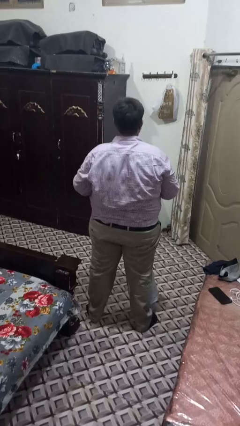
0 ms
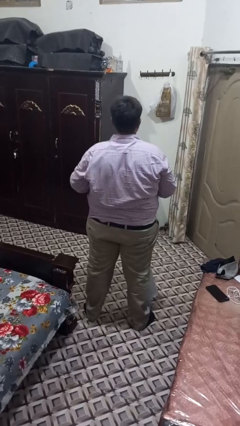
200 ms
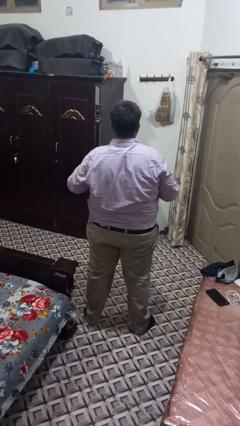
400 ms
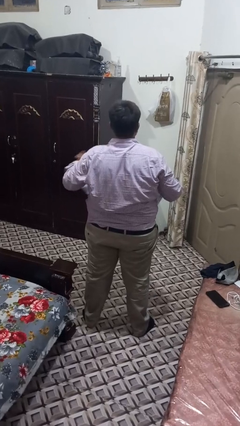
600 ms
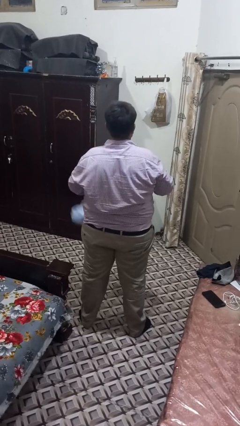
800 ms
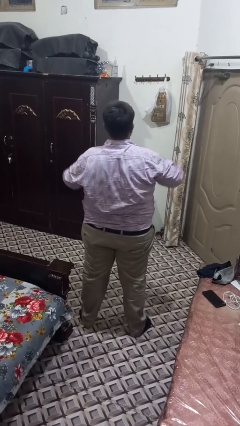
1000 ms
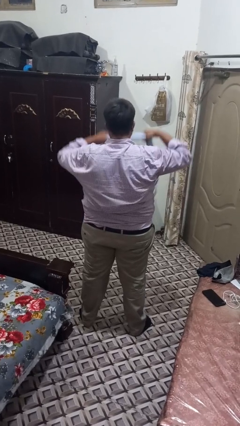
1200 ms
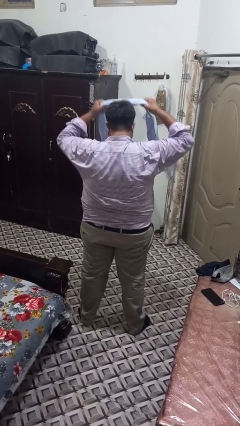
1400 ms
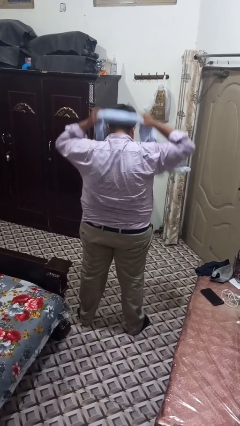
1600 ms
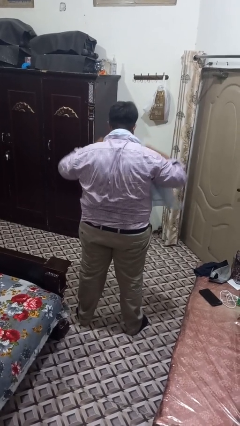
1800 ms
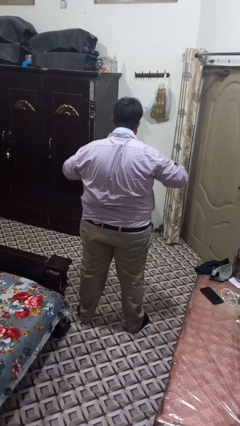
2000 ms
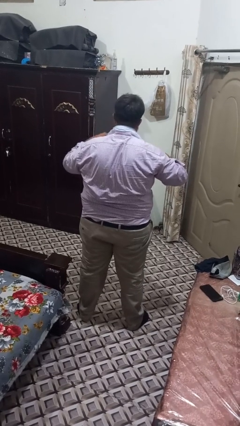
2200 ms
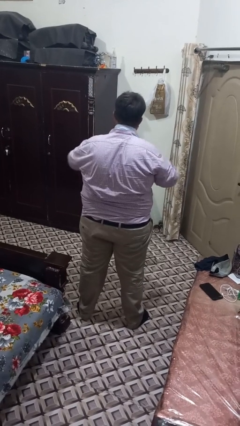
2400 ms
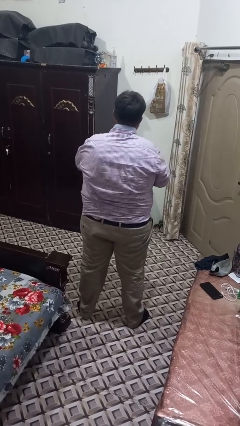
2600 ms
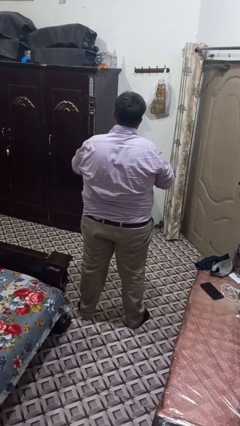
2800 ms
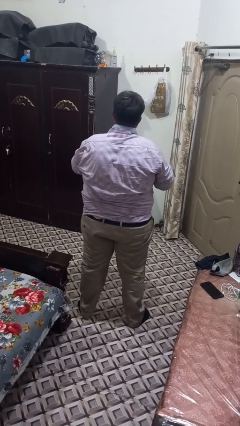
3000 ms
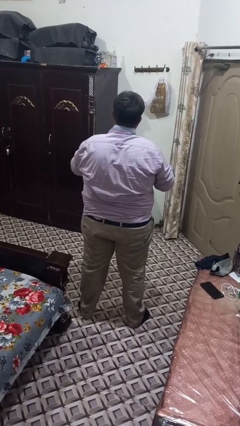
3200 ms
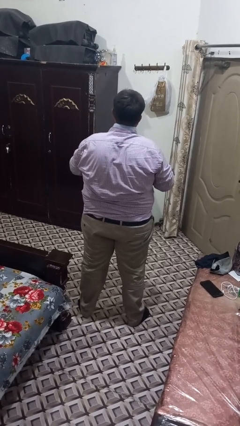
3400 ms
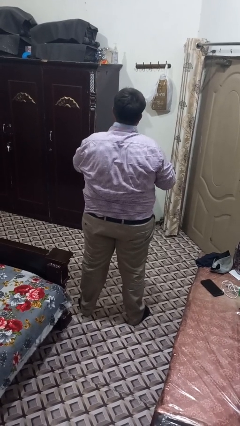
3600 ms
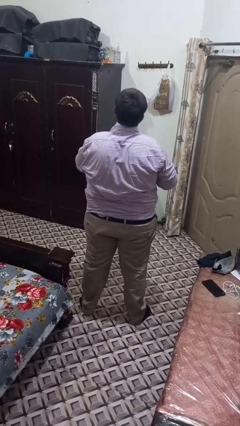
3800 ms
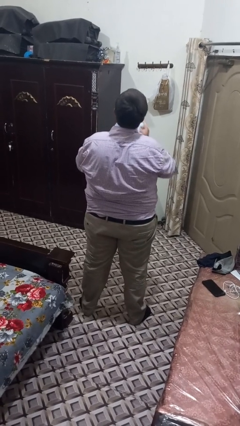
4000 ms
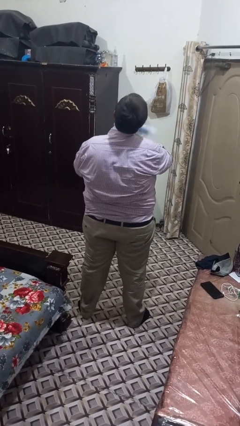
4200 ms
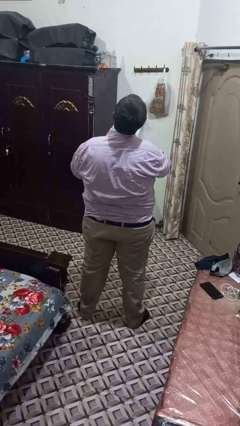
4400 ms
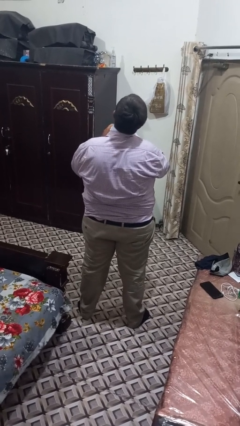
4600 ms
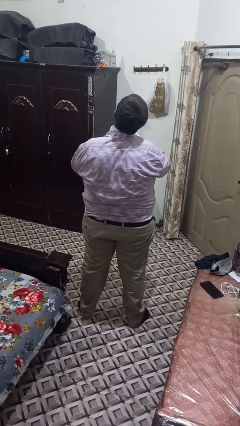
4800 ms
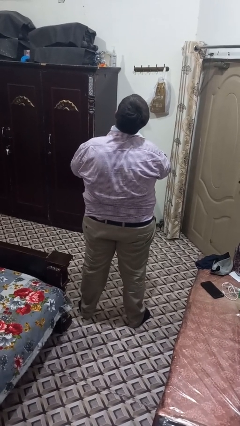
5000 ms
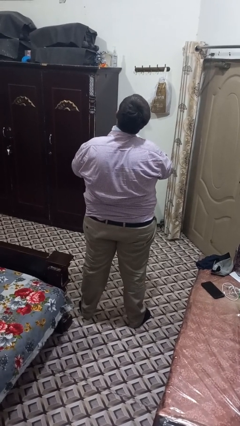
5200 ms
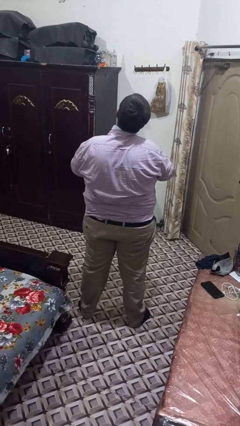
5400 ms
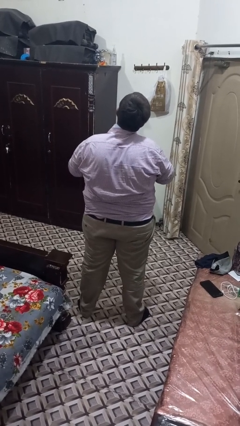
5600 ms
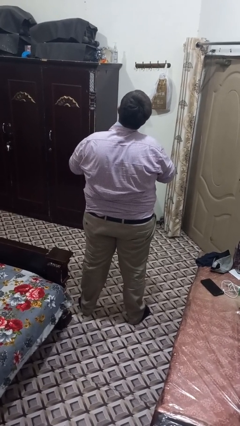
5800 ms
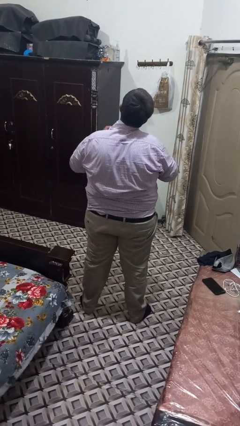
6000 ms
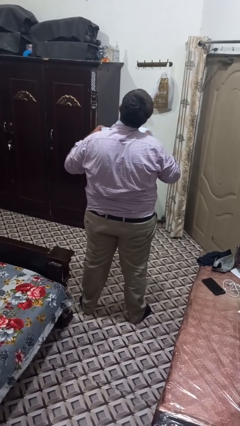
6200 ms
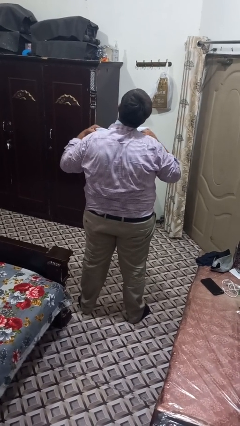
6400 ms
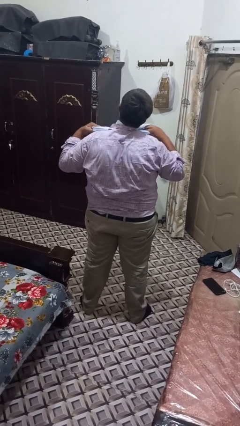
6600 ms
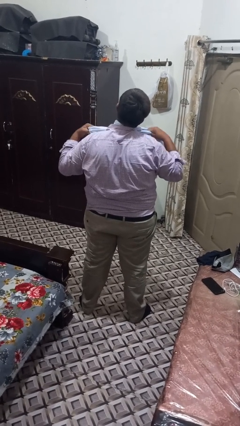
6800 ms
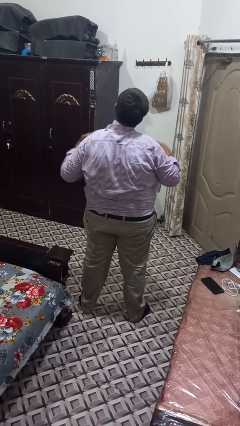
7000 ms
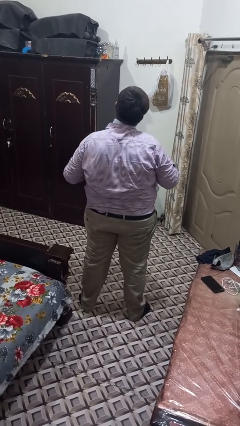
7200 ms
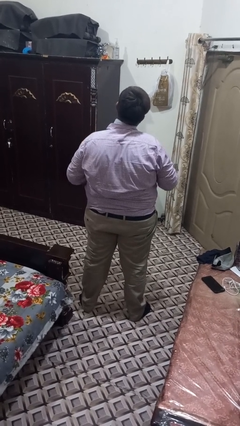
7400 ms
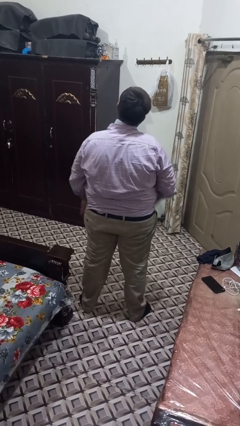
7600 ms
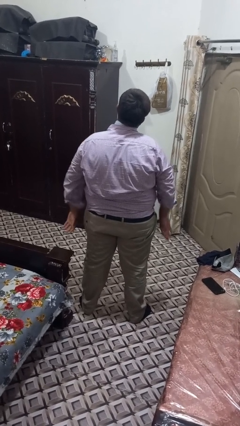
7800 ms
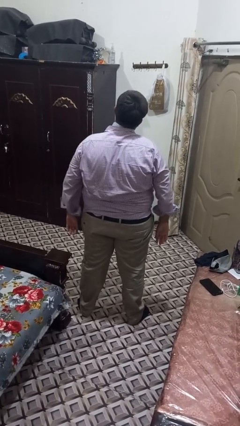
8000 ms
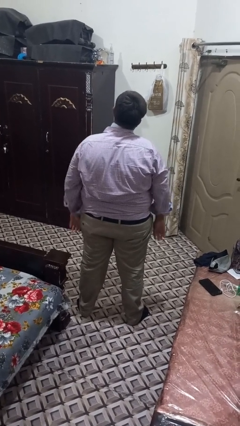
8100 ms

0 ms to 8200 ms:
person puts on scarf

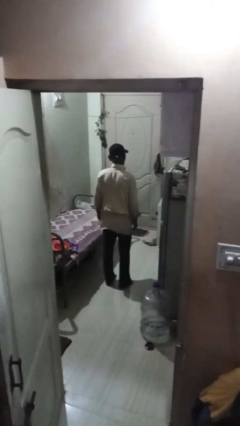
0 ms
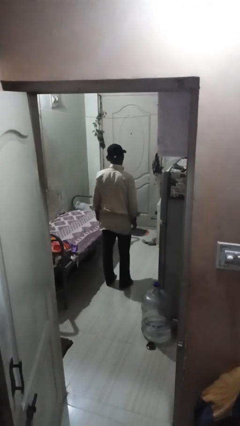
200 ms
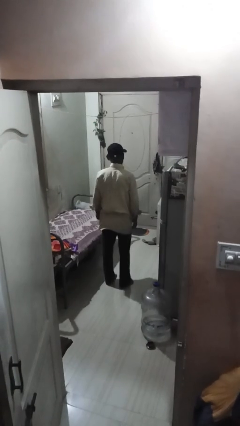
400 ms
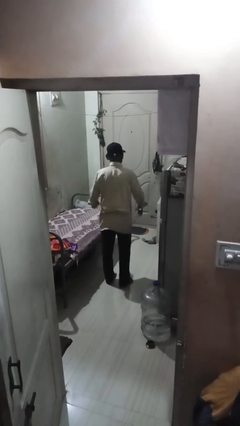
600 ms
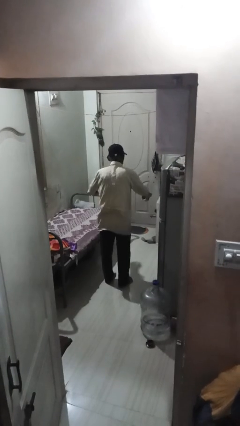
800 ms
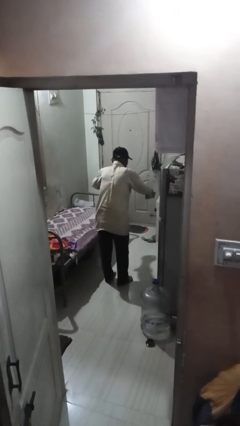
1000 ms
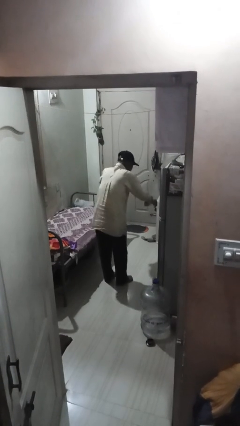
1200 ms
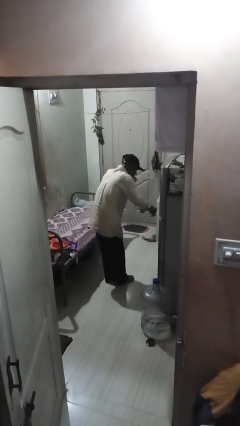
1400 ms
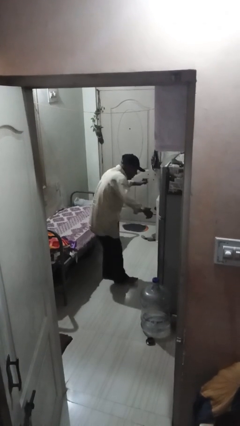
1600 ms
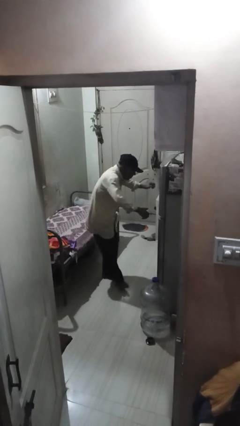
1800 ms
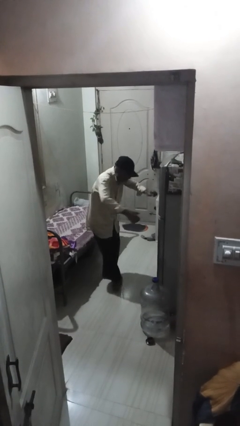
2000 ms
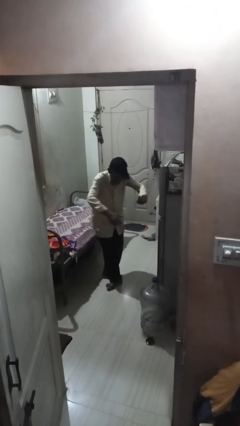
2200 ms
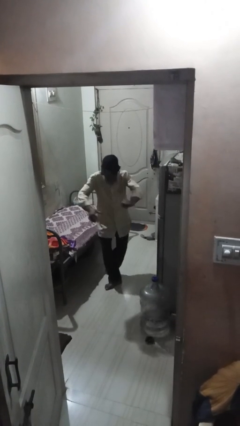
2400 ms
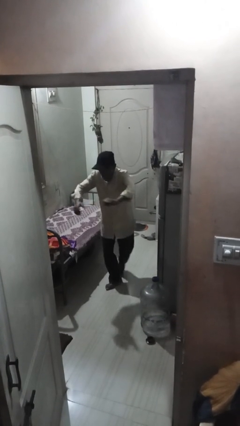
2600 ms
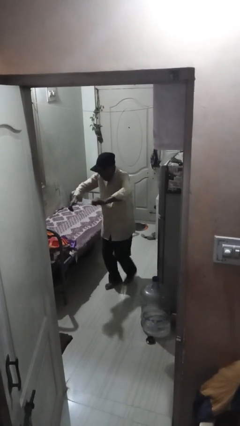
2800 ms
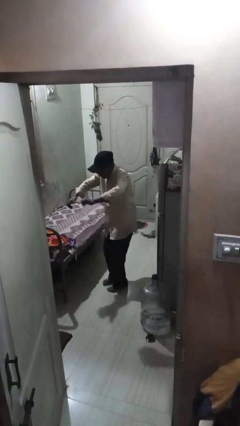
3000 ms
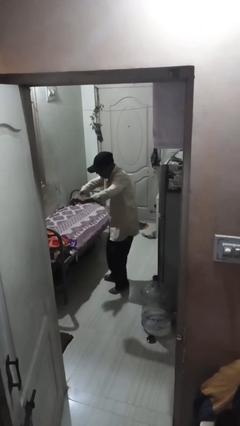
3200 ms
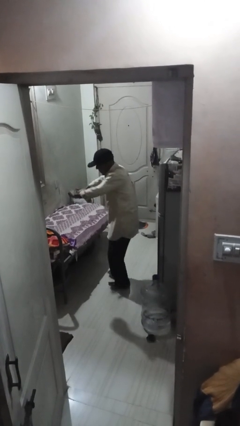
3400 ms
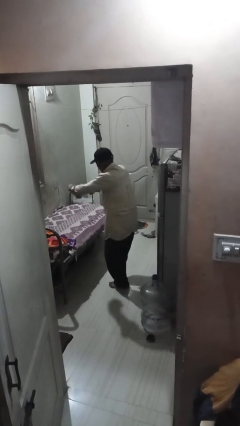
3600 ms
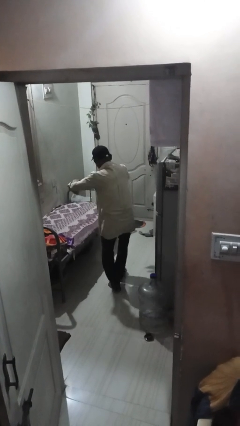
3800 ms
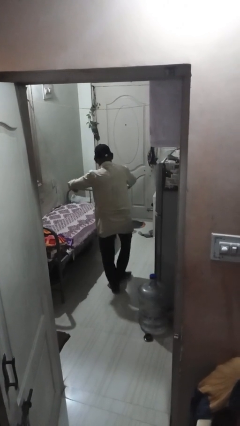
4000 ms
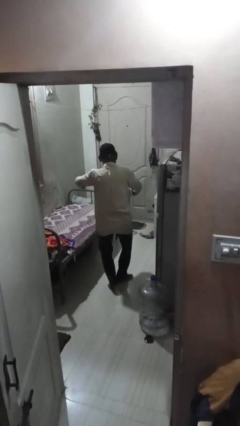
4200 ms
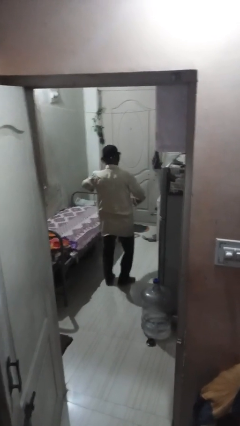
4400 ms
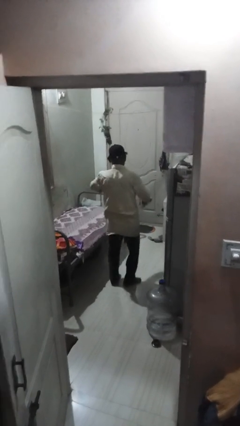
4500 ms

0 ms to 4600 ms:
person twirls

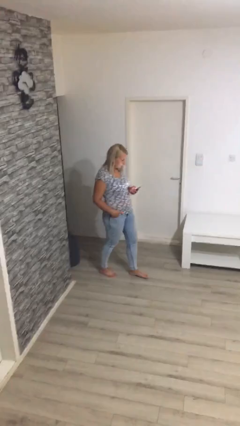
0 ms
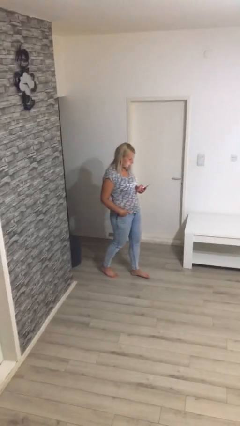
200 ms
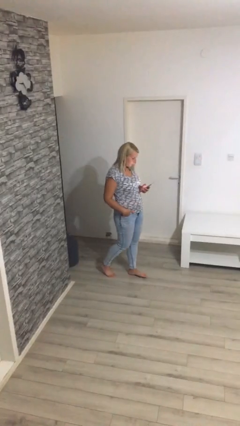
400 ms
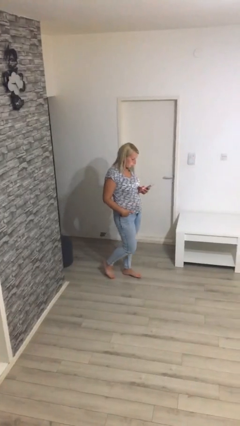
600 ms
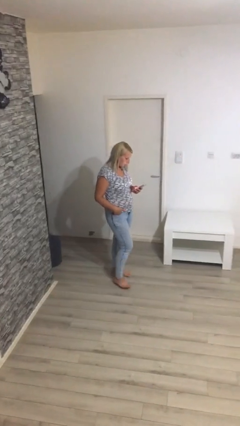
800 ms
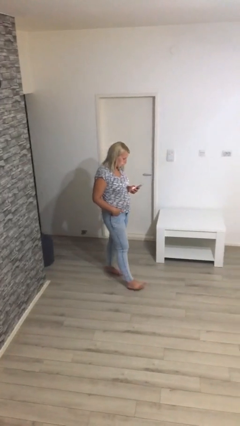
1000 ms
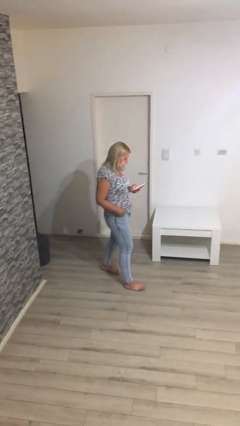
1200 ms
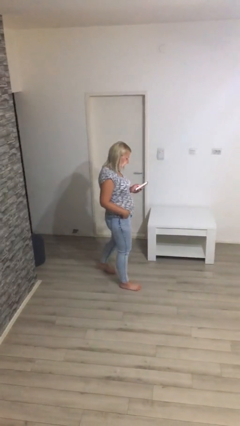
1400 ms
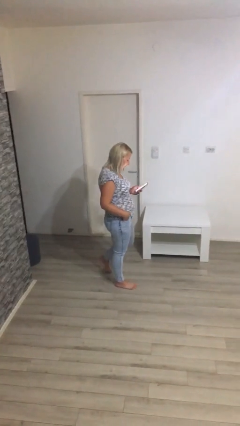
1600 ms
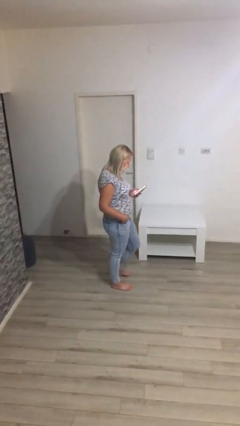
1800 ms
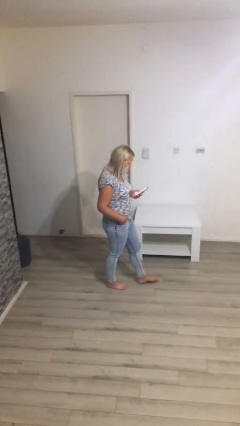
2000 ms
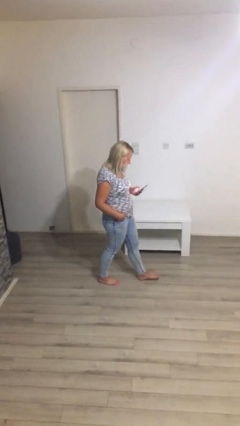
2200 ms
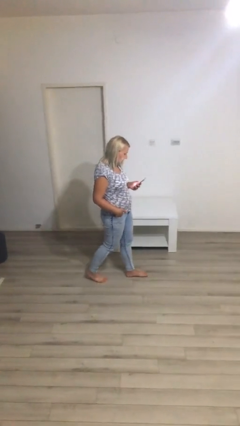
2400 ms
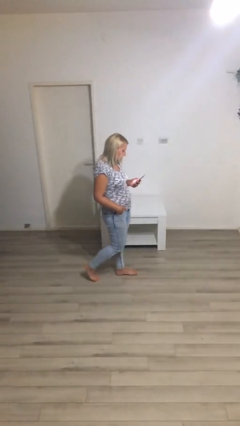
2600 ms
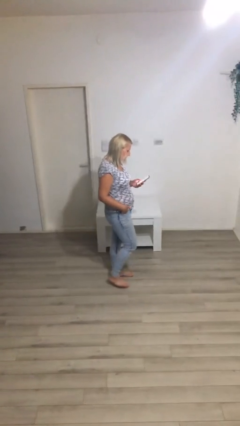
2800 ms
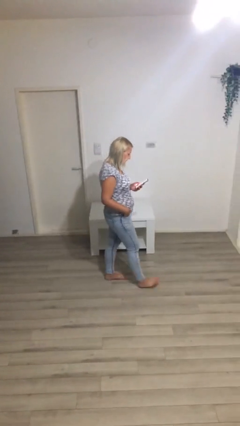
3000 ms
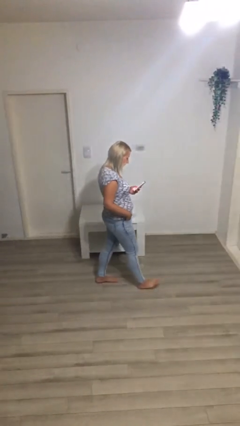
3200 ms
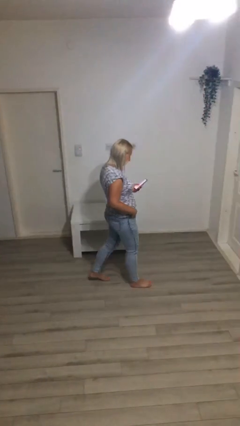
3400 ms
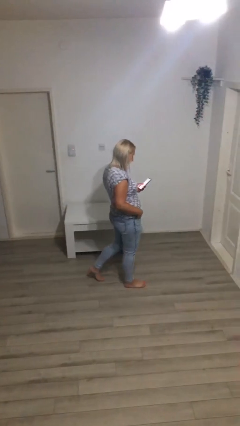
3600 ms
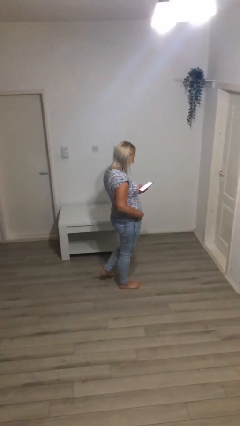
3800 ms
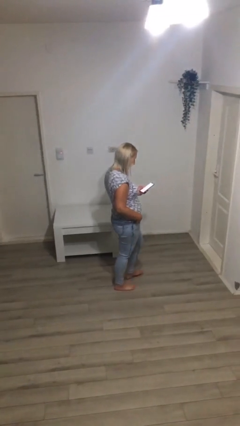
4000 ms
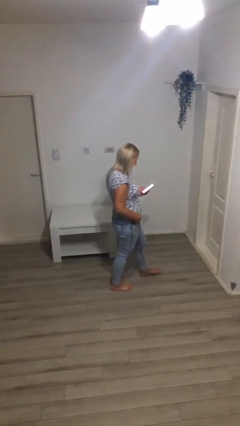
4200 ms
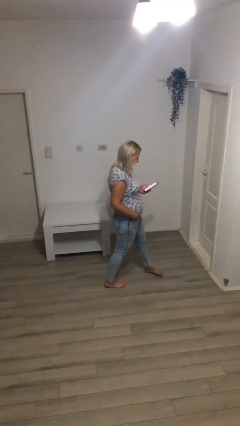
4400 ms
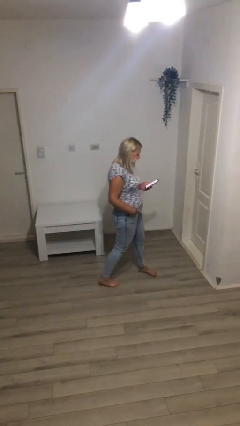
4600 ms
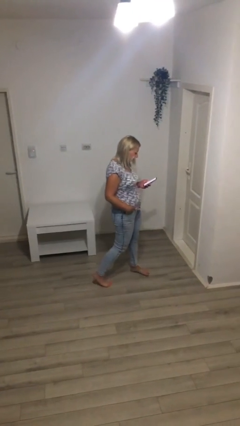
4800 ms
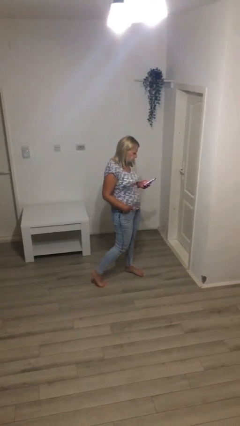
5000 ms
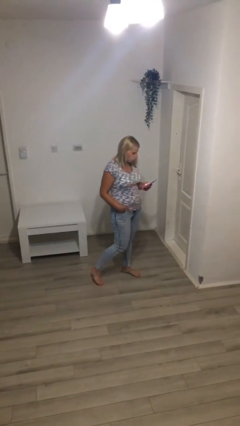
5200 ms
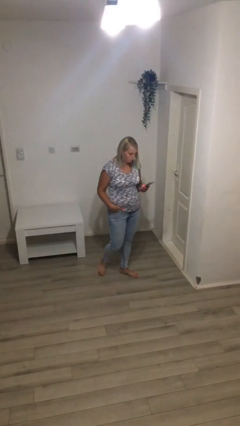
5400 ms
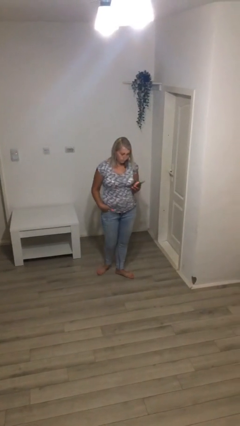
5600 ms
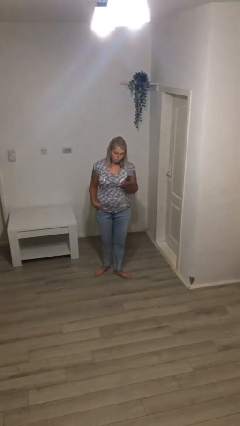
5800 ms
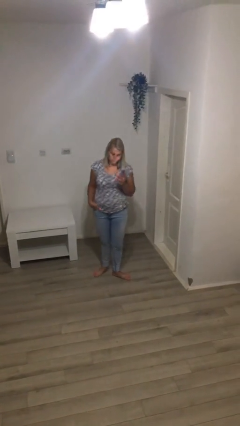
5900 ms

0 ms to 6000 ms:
person texts on phone
